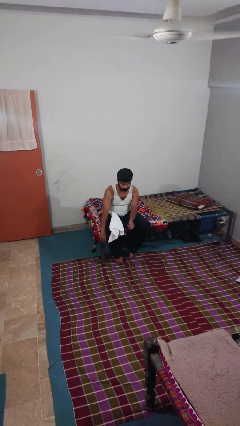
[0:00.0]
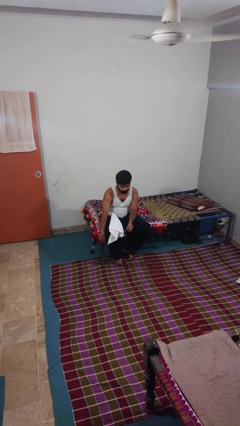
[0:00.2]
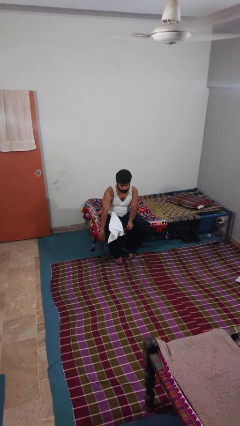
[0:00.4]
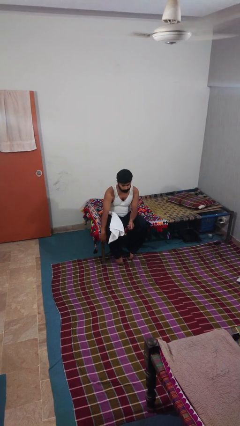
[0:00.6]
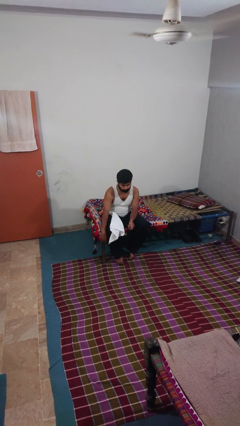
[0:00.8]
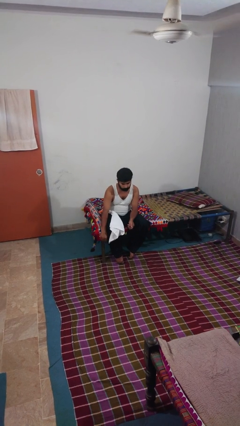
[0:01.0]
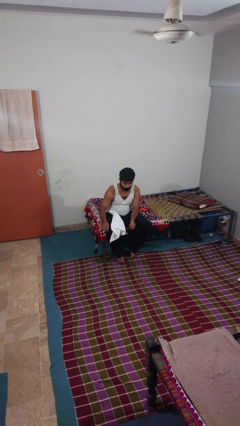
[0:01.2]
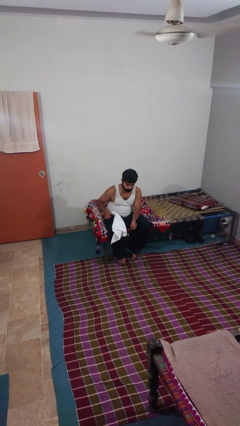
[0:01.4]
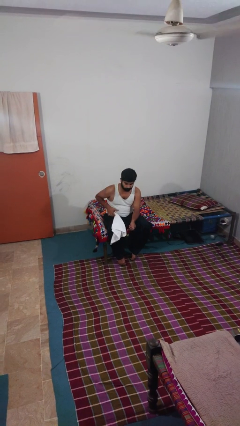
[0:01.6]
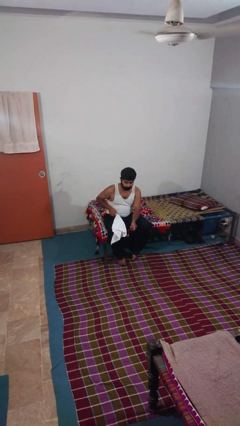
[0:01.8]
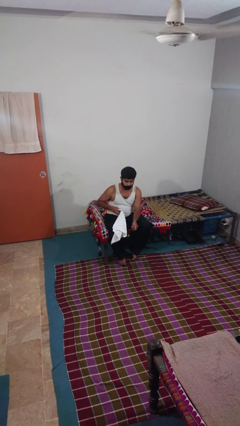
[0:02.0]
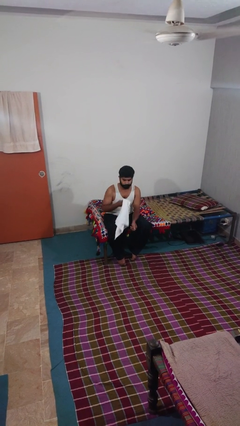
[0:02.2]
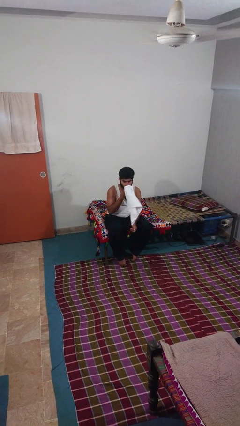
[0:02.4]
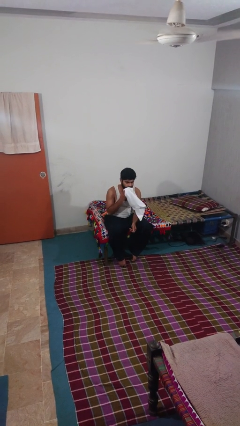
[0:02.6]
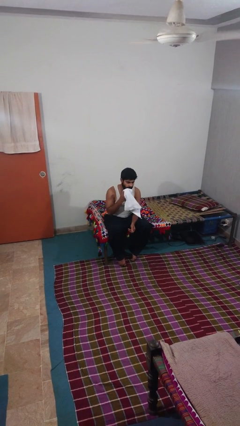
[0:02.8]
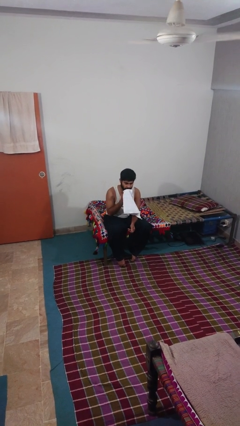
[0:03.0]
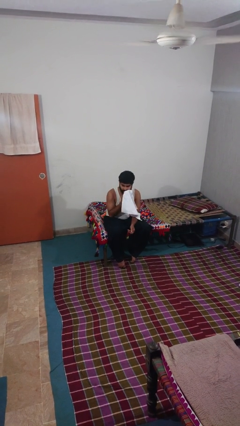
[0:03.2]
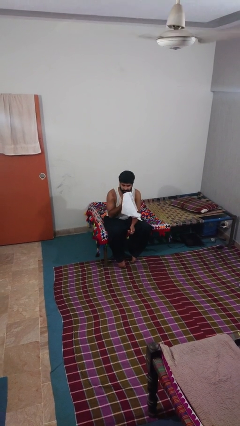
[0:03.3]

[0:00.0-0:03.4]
person wipes mouth with napkin

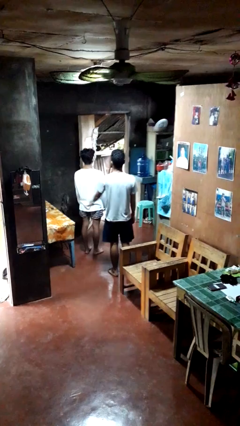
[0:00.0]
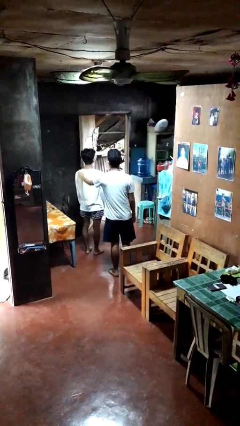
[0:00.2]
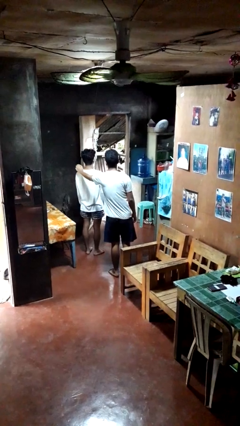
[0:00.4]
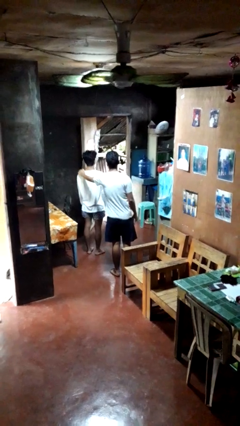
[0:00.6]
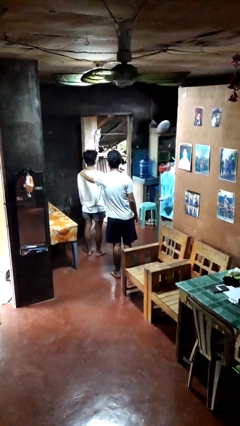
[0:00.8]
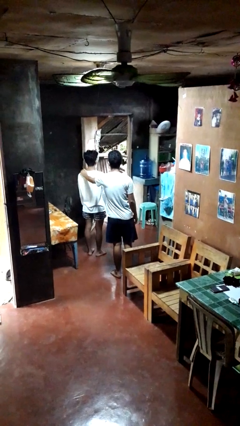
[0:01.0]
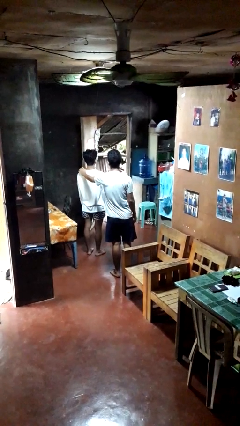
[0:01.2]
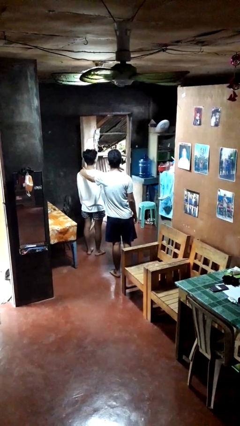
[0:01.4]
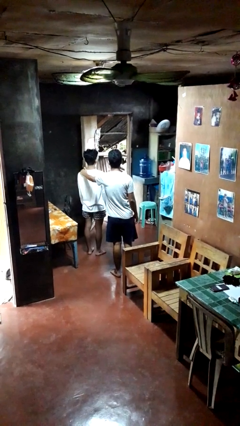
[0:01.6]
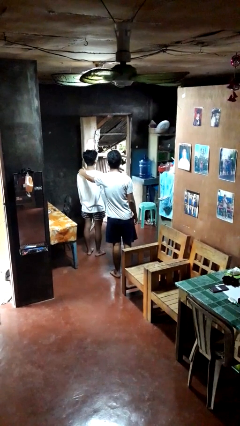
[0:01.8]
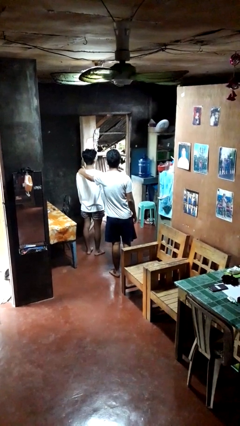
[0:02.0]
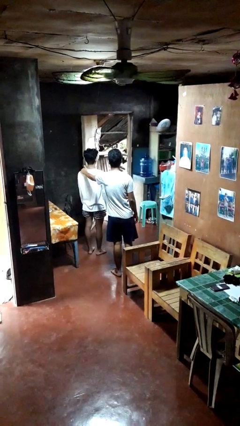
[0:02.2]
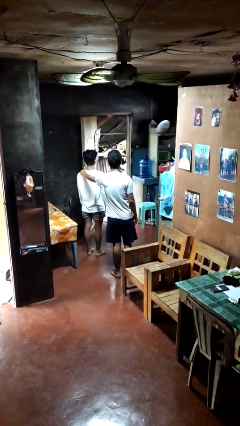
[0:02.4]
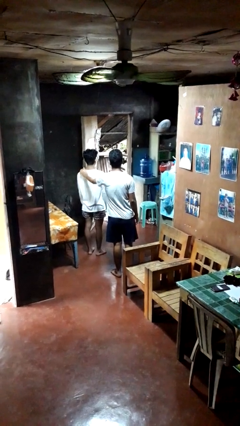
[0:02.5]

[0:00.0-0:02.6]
person pounds shoulders of person

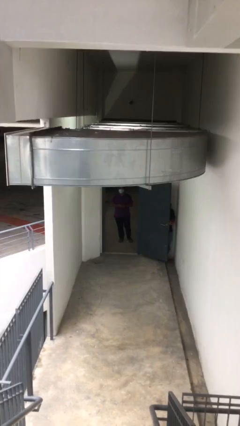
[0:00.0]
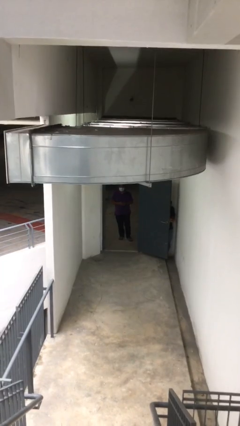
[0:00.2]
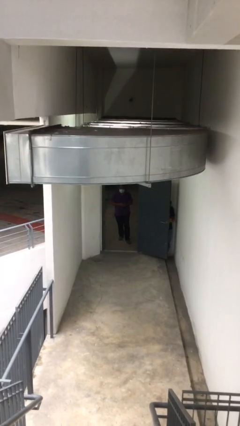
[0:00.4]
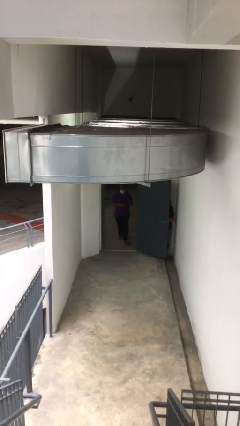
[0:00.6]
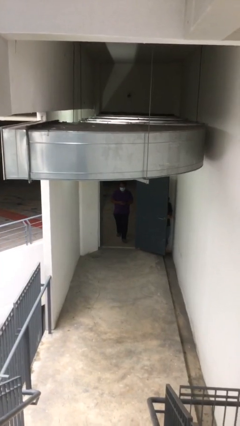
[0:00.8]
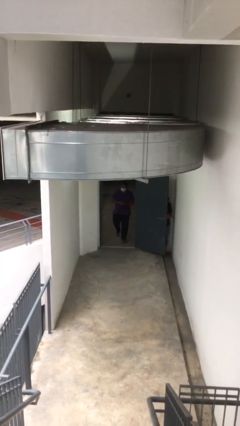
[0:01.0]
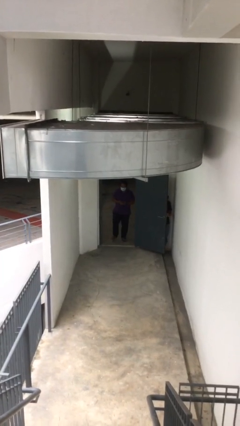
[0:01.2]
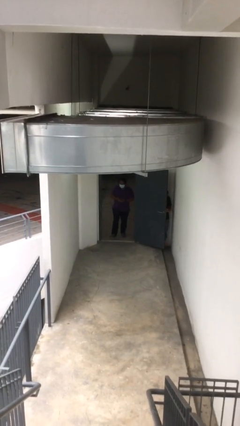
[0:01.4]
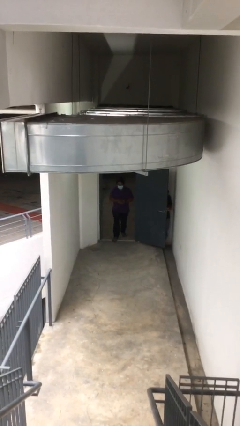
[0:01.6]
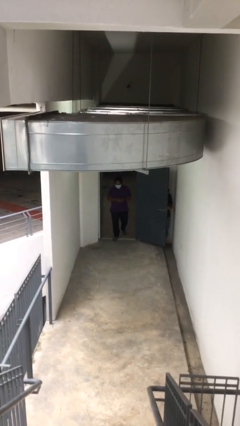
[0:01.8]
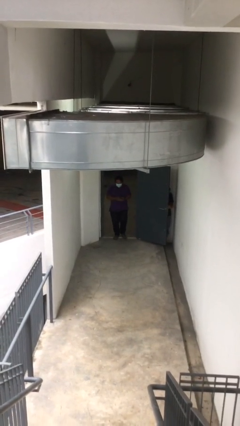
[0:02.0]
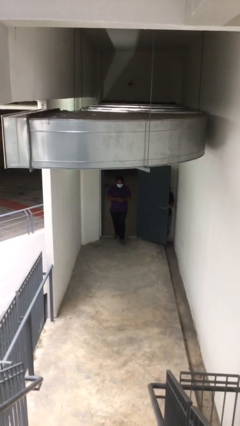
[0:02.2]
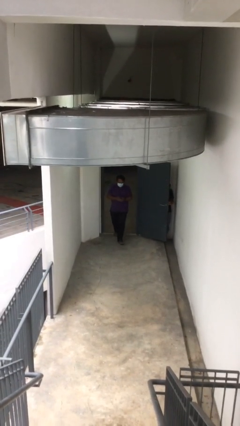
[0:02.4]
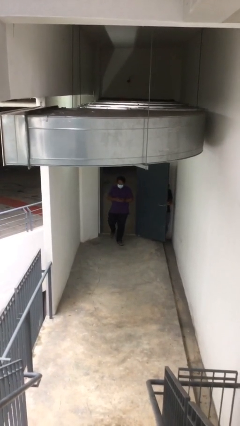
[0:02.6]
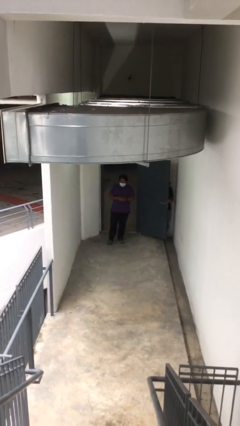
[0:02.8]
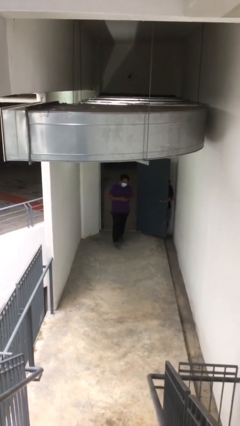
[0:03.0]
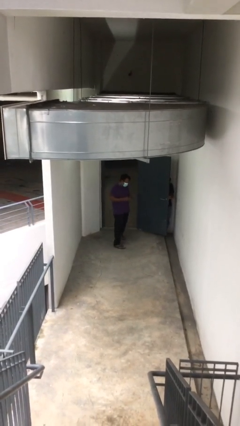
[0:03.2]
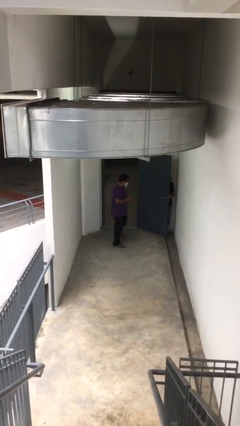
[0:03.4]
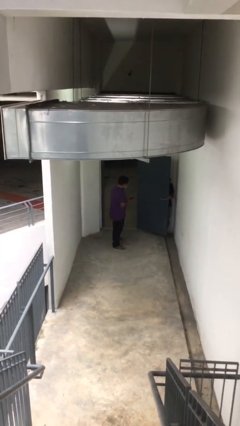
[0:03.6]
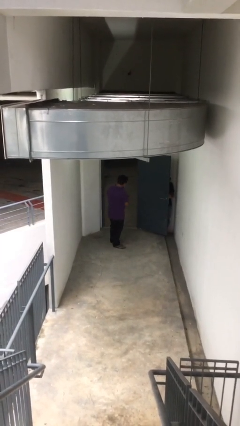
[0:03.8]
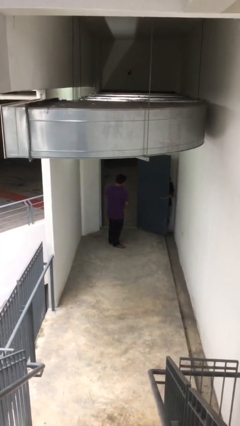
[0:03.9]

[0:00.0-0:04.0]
person enters scene through structure

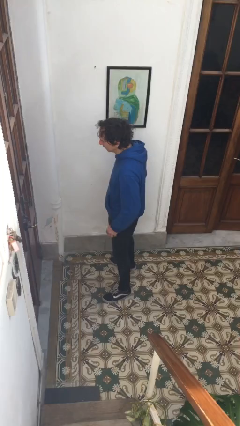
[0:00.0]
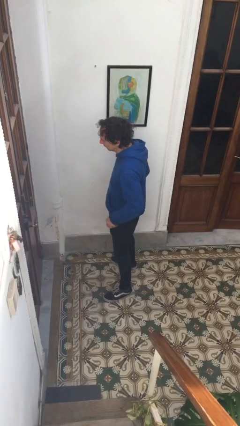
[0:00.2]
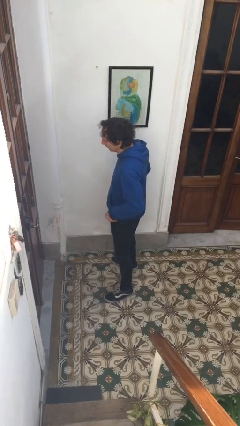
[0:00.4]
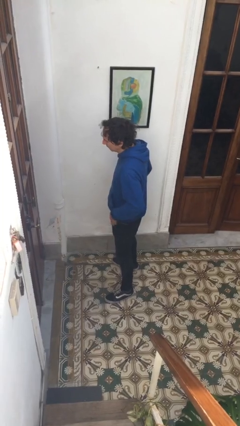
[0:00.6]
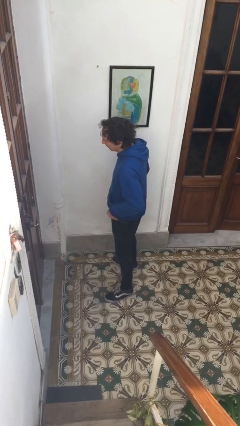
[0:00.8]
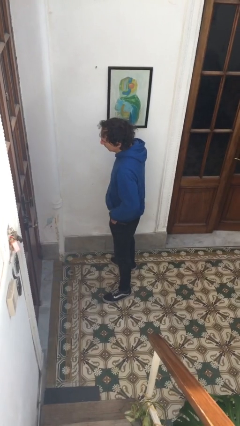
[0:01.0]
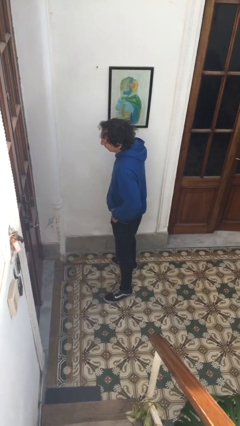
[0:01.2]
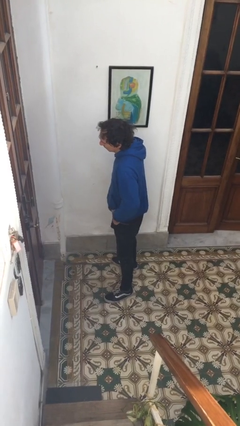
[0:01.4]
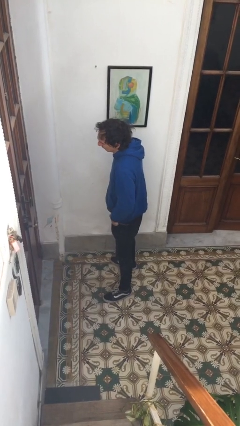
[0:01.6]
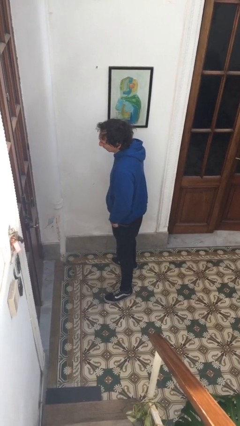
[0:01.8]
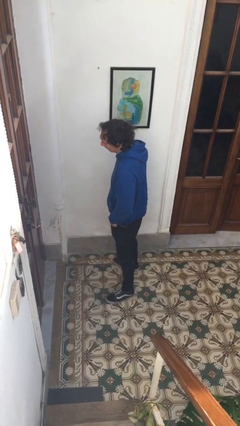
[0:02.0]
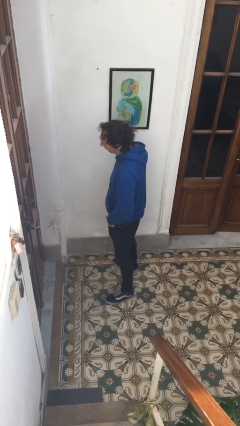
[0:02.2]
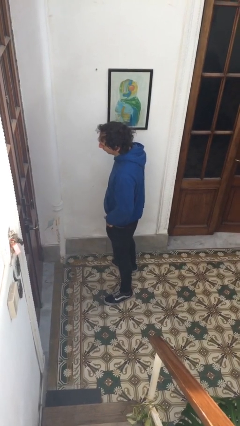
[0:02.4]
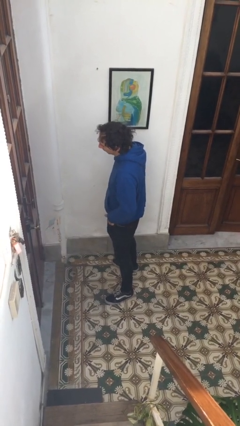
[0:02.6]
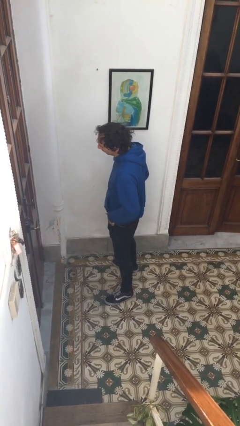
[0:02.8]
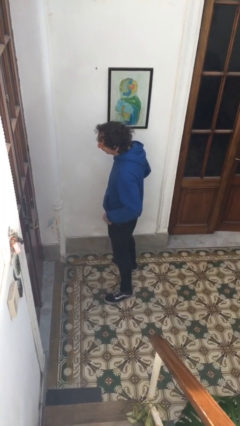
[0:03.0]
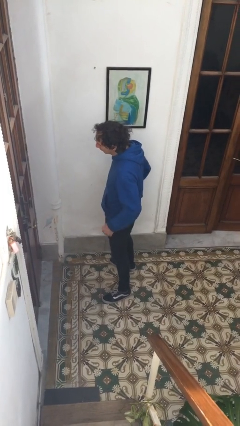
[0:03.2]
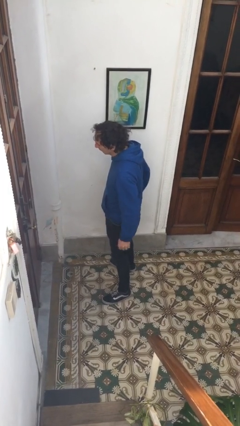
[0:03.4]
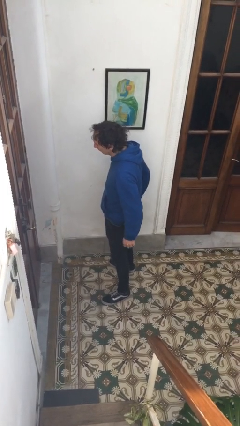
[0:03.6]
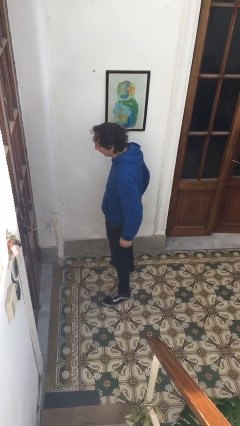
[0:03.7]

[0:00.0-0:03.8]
person puts hands in back pockets

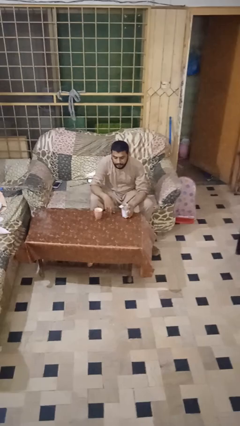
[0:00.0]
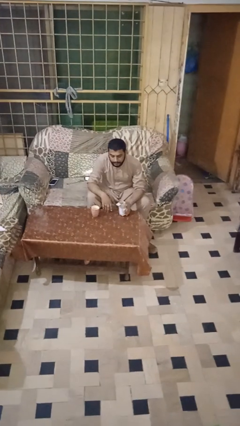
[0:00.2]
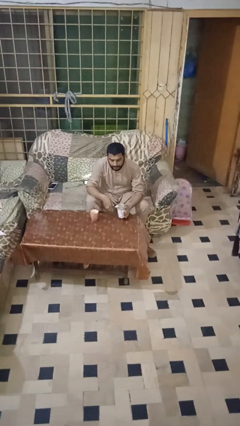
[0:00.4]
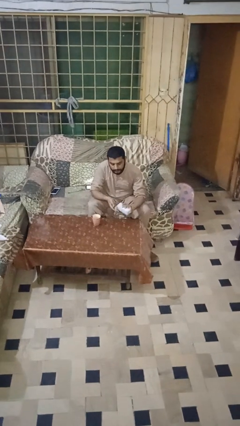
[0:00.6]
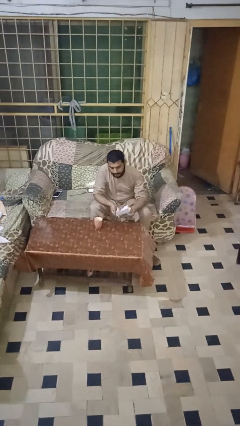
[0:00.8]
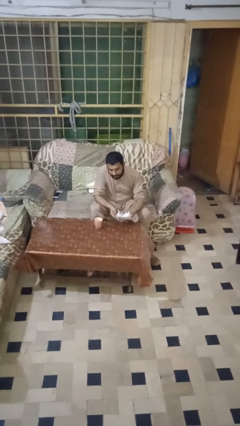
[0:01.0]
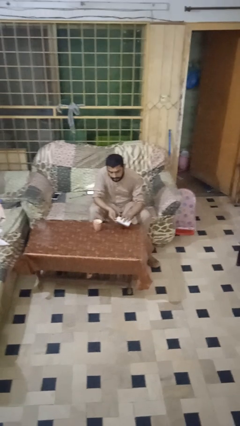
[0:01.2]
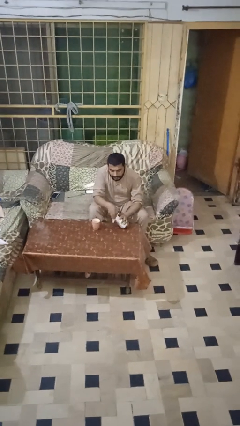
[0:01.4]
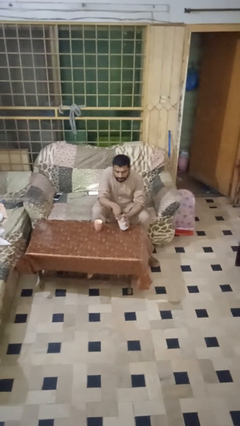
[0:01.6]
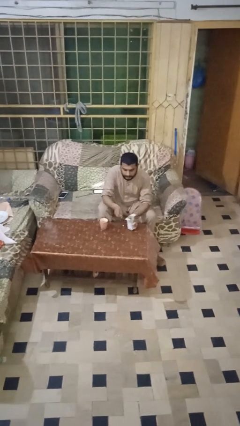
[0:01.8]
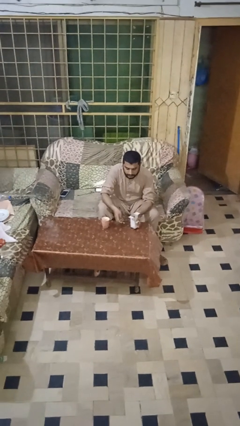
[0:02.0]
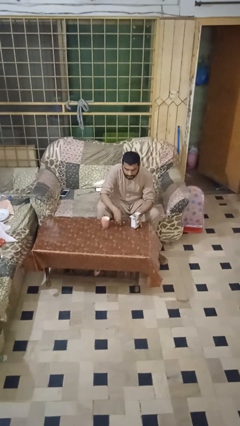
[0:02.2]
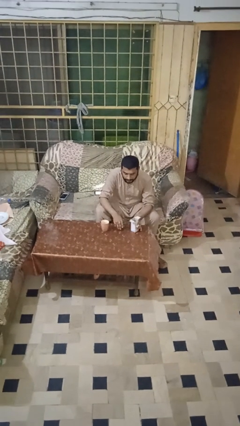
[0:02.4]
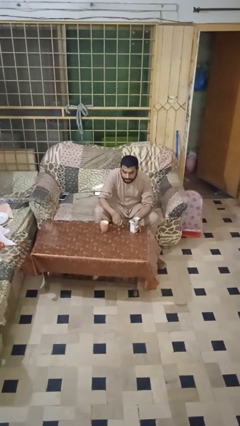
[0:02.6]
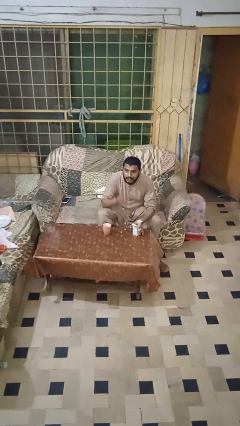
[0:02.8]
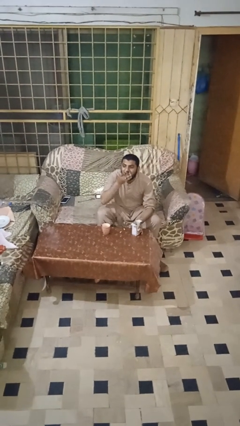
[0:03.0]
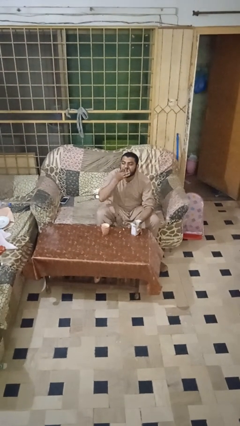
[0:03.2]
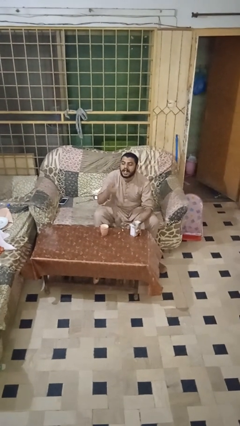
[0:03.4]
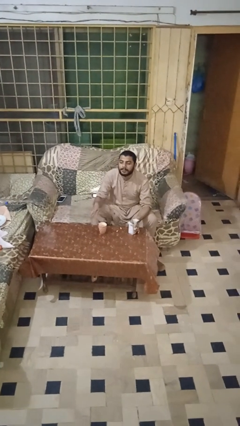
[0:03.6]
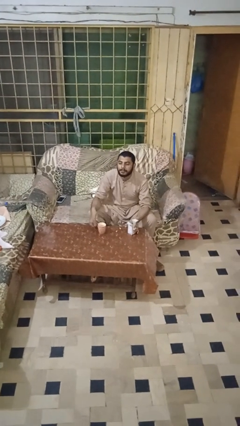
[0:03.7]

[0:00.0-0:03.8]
person takes medicine pills
